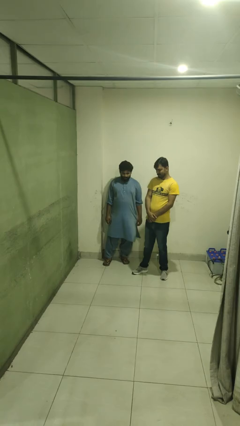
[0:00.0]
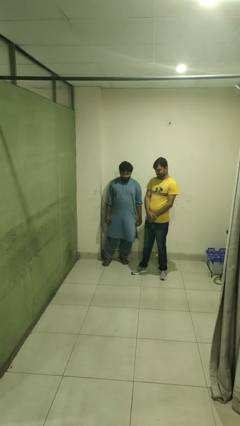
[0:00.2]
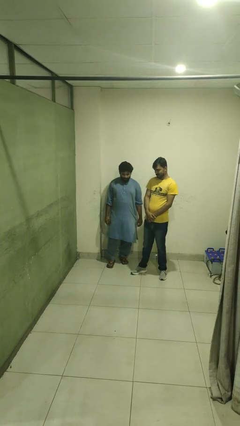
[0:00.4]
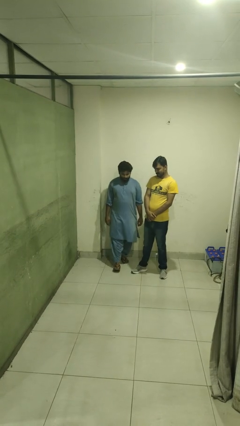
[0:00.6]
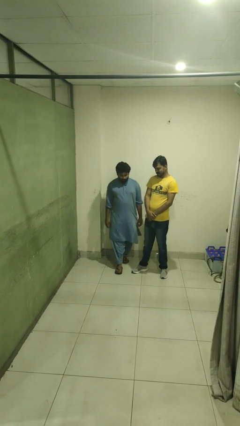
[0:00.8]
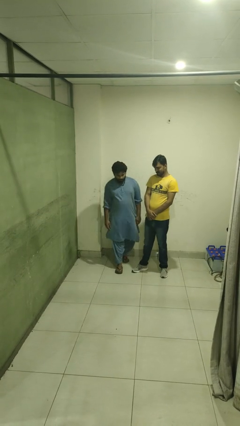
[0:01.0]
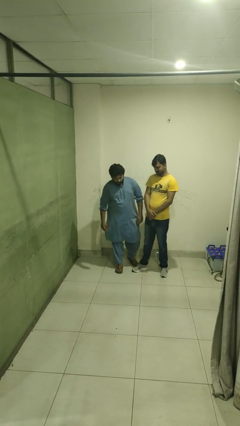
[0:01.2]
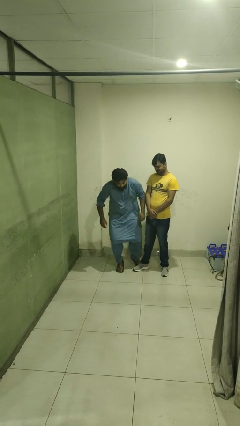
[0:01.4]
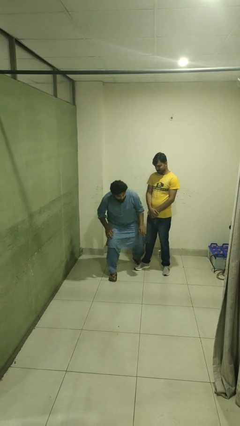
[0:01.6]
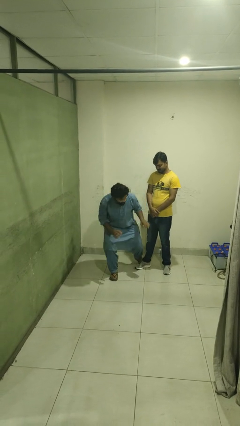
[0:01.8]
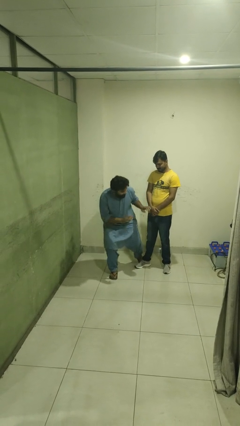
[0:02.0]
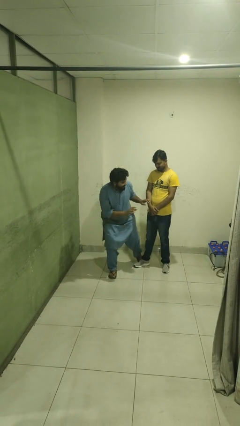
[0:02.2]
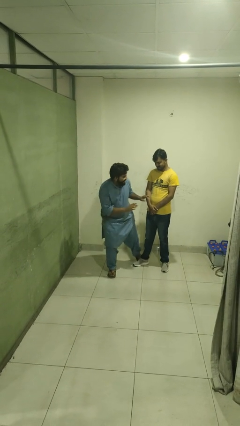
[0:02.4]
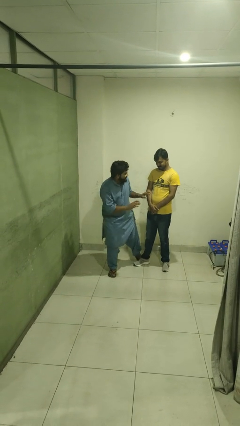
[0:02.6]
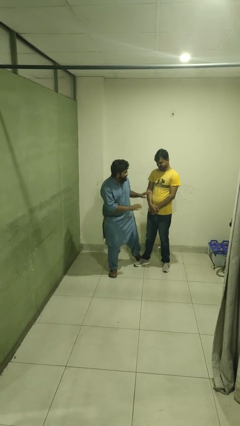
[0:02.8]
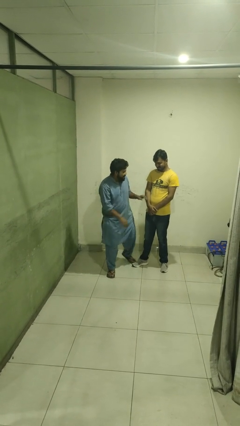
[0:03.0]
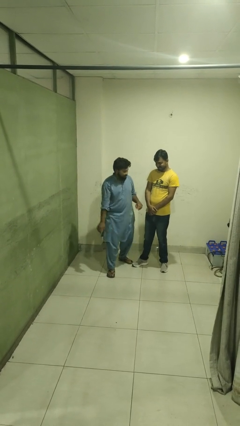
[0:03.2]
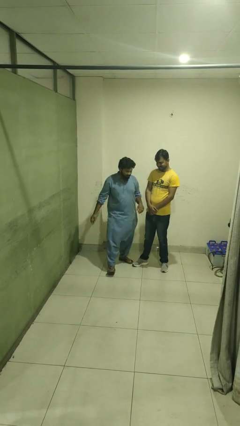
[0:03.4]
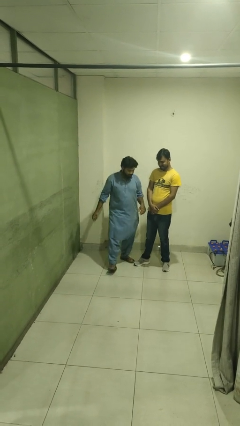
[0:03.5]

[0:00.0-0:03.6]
person bumps into person

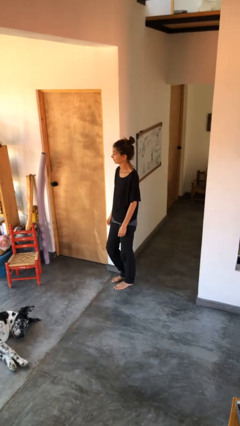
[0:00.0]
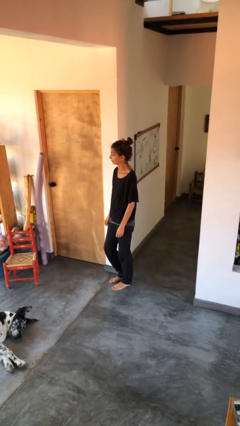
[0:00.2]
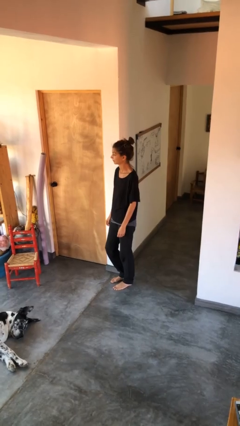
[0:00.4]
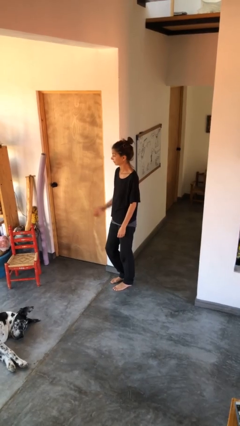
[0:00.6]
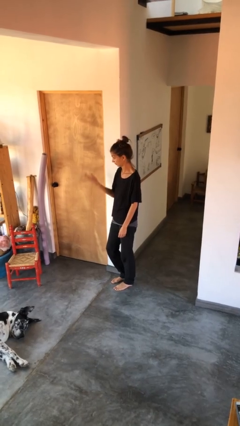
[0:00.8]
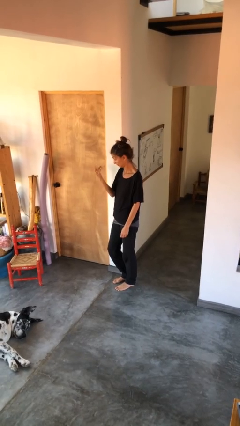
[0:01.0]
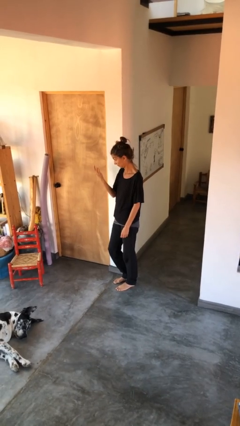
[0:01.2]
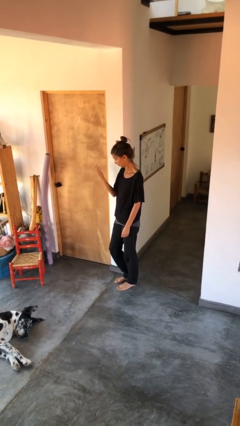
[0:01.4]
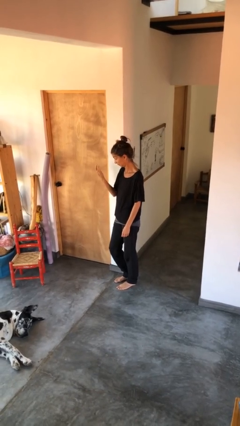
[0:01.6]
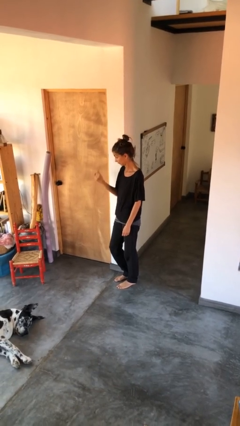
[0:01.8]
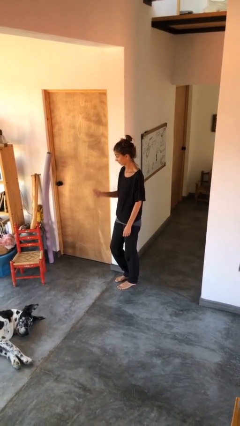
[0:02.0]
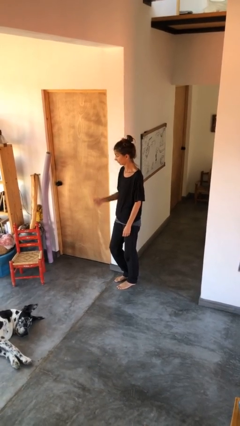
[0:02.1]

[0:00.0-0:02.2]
person gestures come here

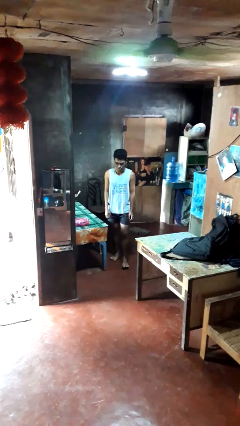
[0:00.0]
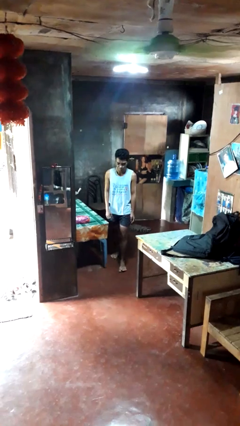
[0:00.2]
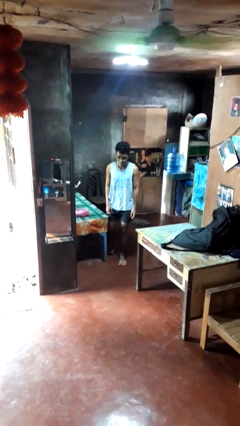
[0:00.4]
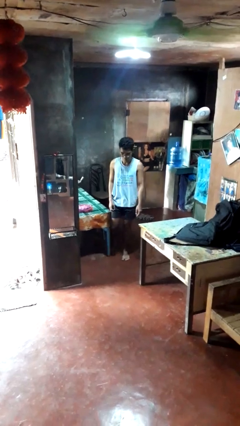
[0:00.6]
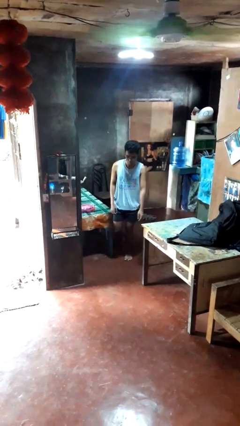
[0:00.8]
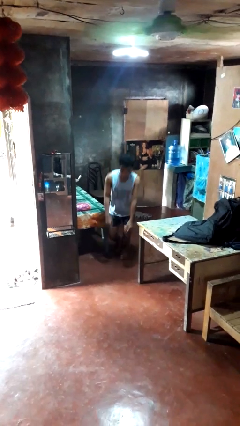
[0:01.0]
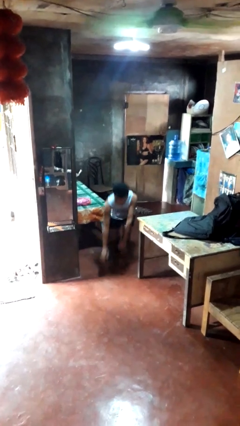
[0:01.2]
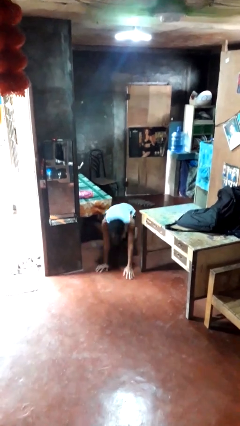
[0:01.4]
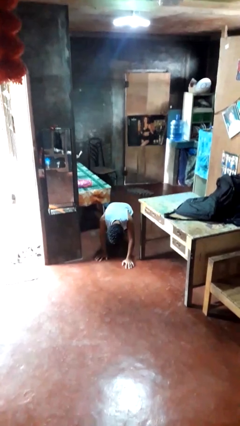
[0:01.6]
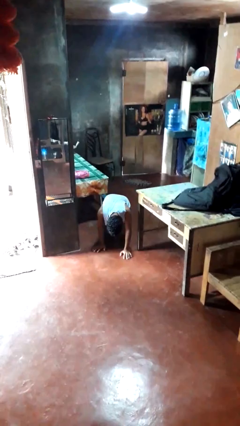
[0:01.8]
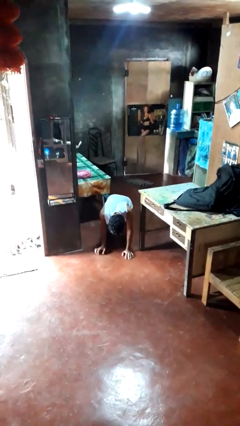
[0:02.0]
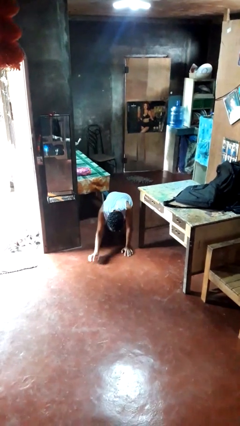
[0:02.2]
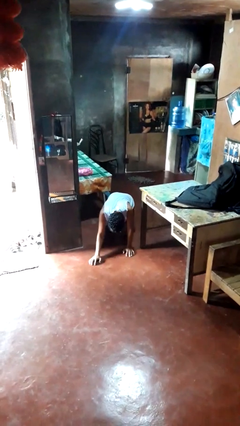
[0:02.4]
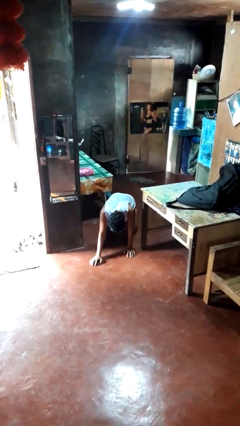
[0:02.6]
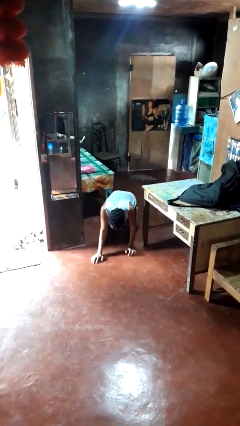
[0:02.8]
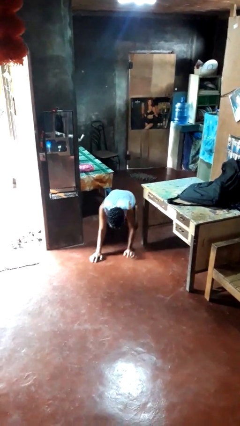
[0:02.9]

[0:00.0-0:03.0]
person trips on object on floor

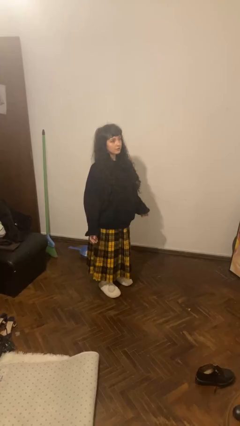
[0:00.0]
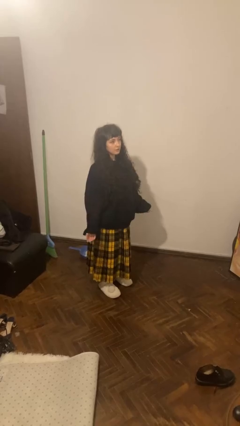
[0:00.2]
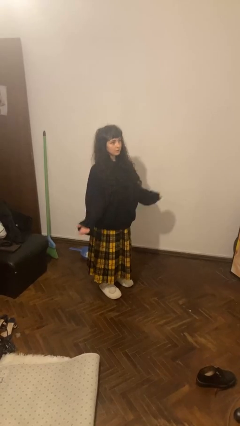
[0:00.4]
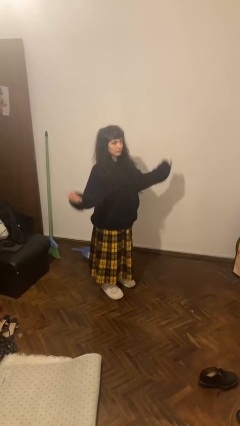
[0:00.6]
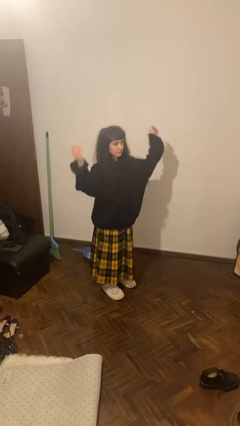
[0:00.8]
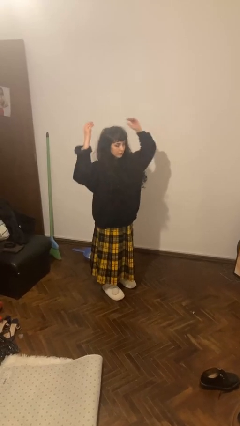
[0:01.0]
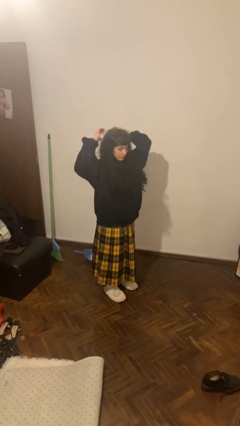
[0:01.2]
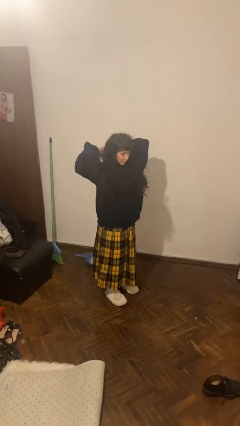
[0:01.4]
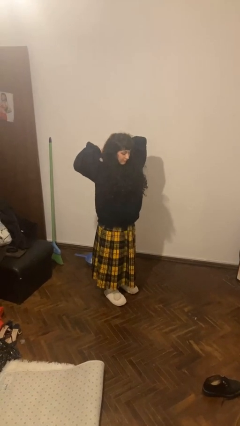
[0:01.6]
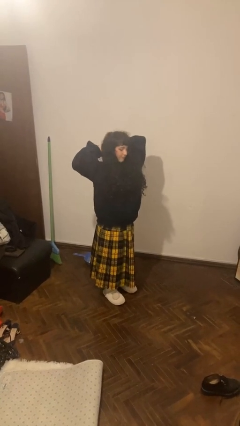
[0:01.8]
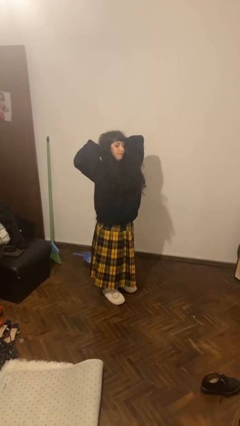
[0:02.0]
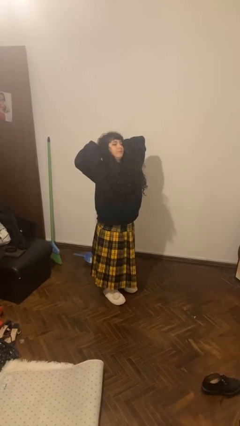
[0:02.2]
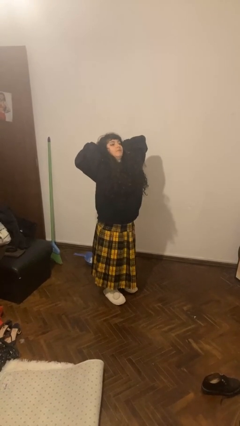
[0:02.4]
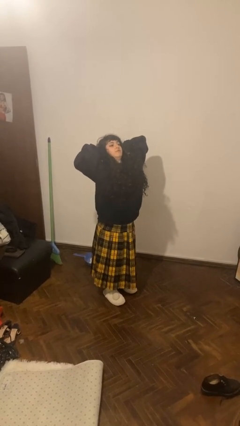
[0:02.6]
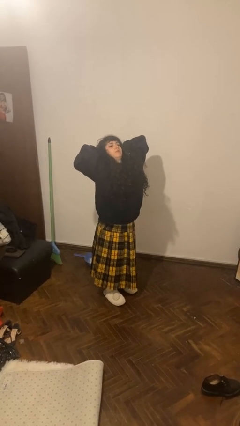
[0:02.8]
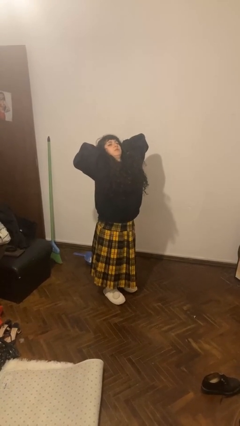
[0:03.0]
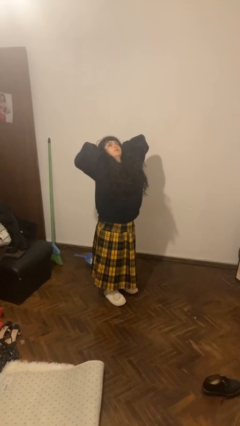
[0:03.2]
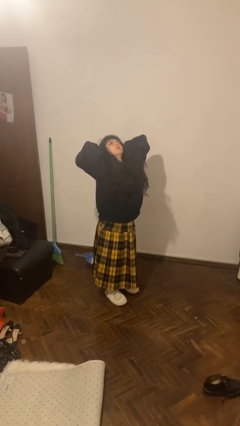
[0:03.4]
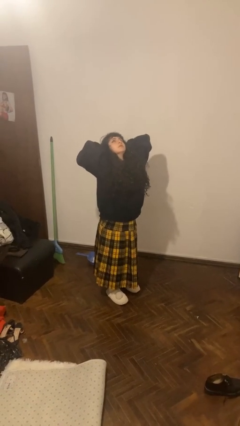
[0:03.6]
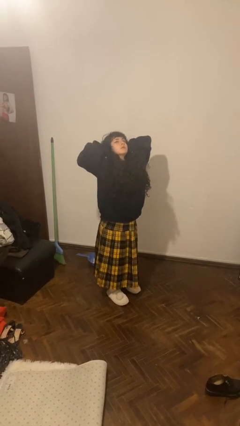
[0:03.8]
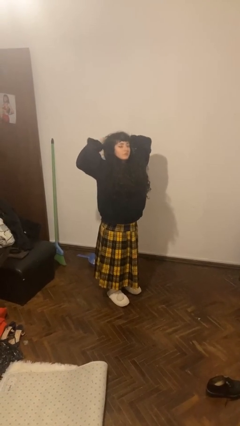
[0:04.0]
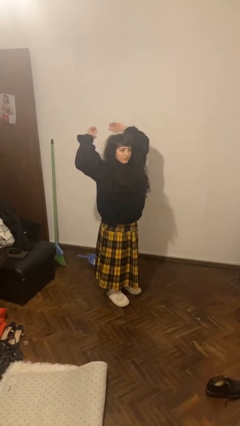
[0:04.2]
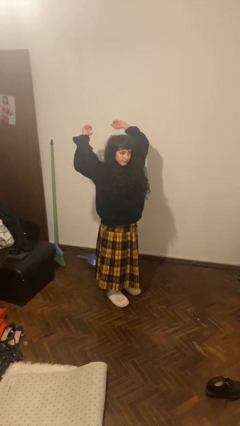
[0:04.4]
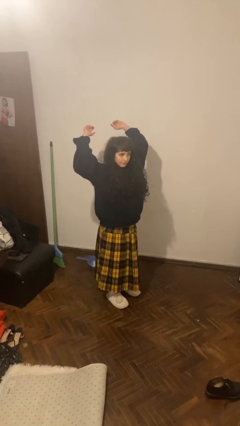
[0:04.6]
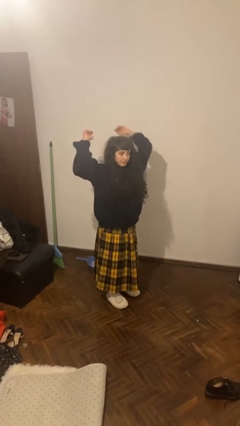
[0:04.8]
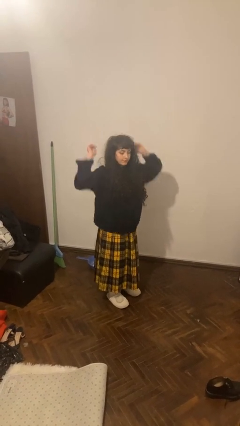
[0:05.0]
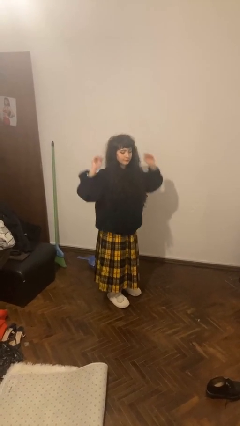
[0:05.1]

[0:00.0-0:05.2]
person stretches arms over head

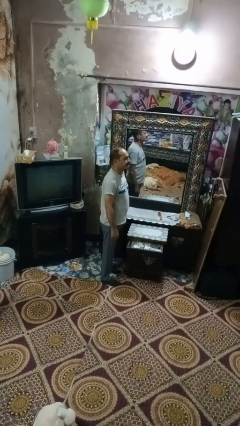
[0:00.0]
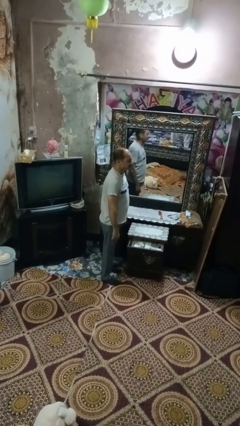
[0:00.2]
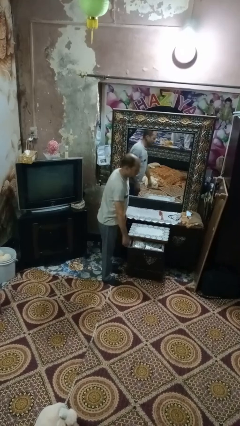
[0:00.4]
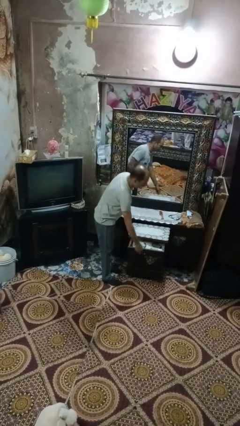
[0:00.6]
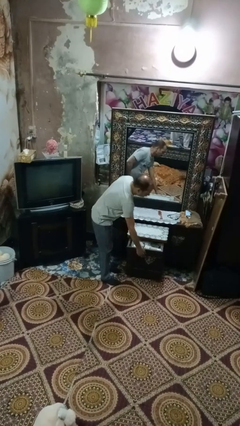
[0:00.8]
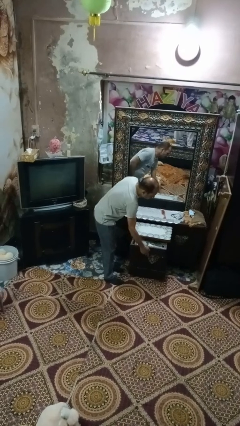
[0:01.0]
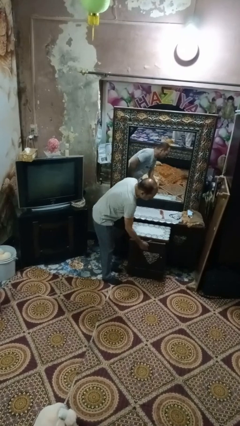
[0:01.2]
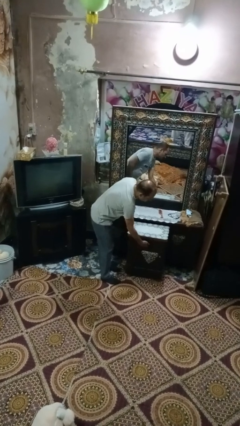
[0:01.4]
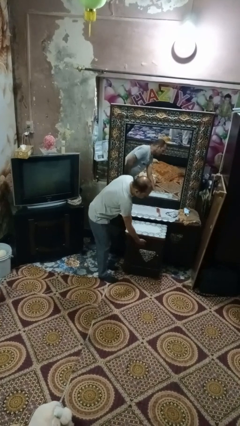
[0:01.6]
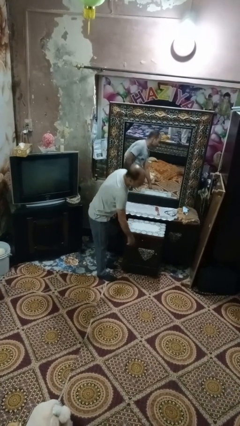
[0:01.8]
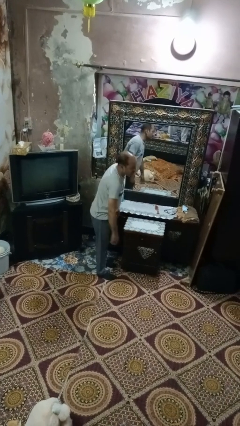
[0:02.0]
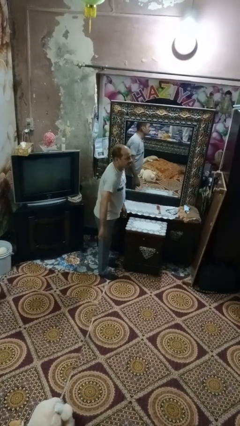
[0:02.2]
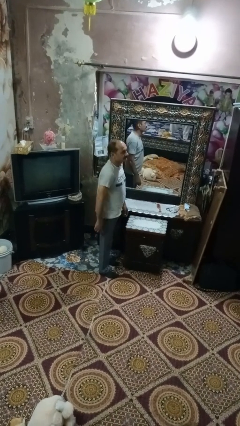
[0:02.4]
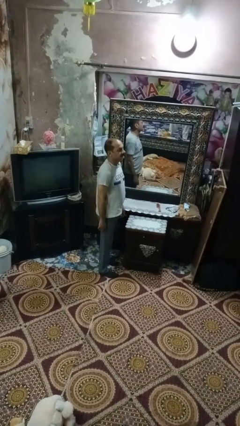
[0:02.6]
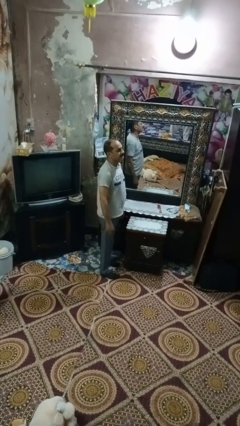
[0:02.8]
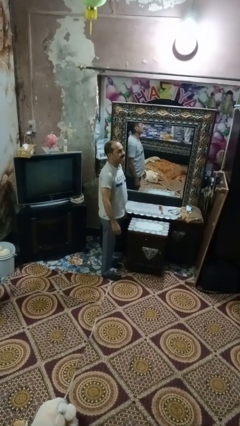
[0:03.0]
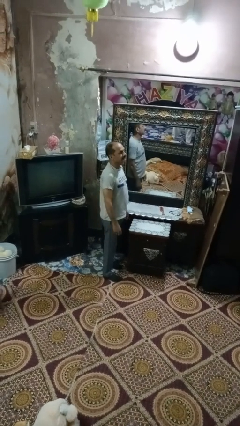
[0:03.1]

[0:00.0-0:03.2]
person closes dresser drawer

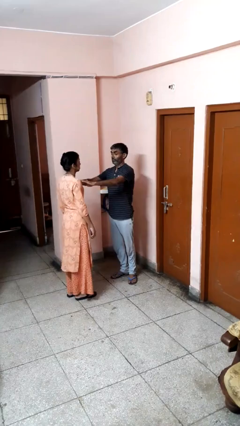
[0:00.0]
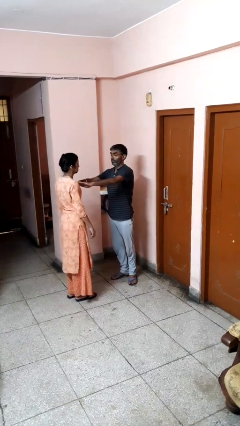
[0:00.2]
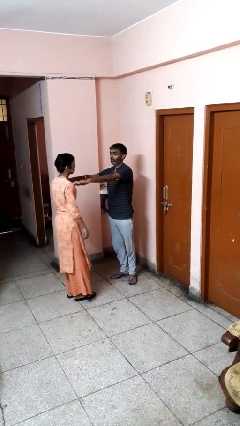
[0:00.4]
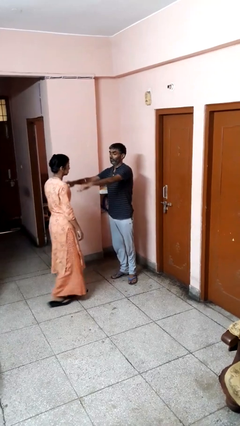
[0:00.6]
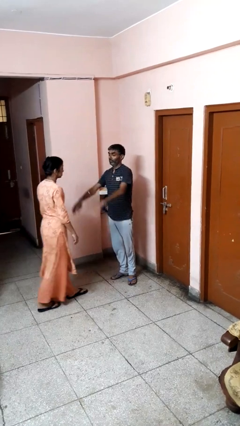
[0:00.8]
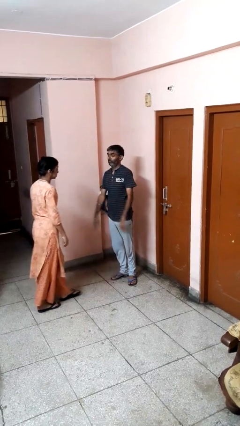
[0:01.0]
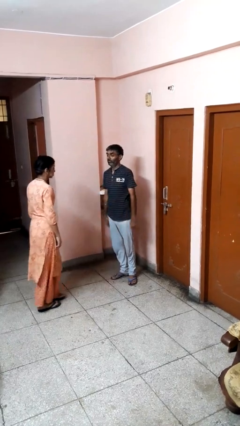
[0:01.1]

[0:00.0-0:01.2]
person shoves person
